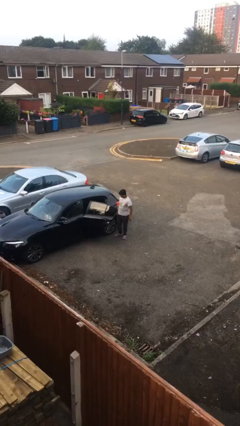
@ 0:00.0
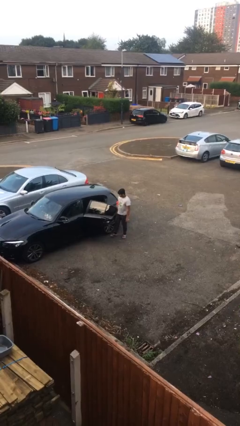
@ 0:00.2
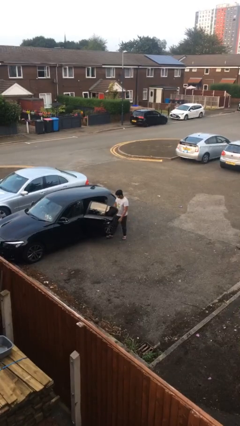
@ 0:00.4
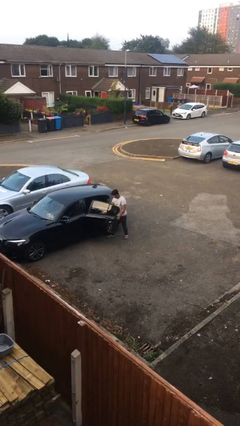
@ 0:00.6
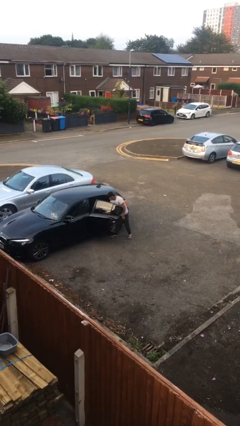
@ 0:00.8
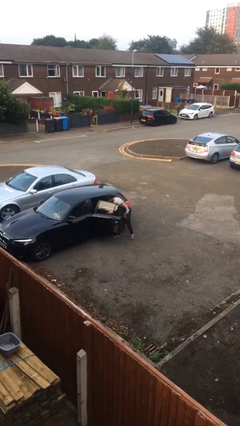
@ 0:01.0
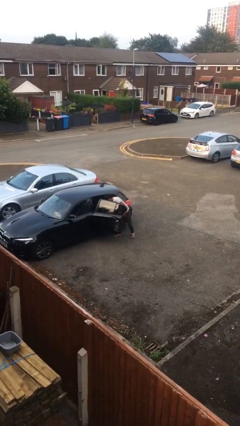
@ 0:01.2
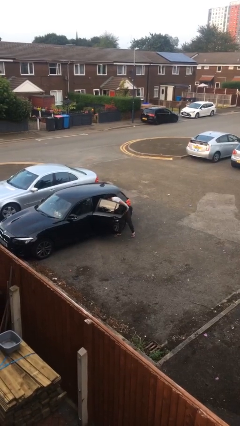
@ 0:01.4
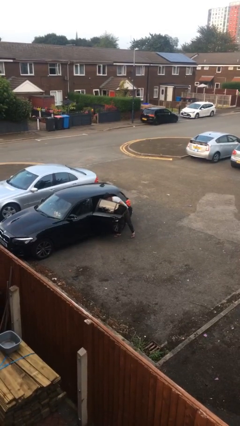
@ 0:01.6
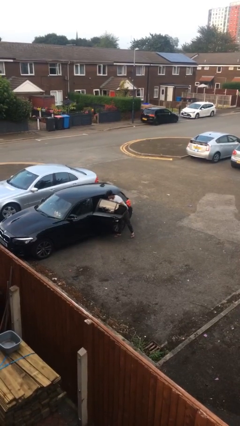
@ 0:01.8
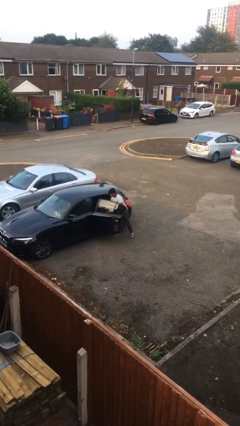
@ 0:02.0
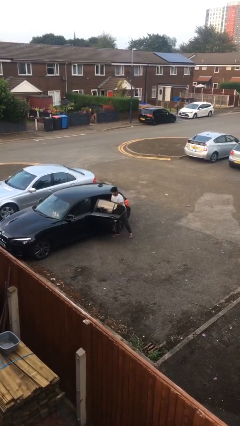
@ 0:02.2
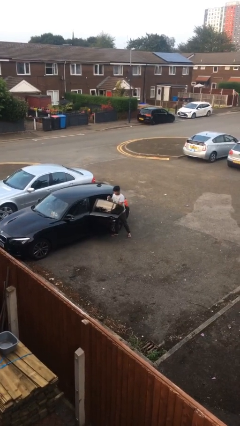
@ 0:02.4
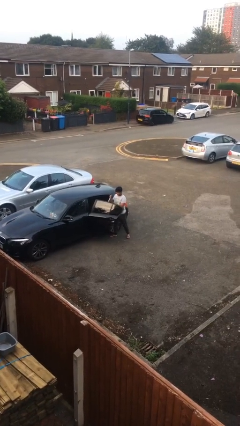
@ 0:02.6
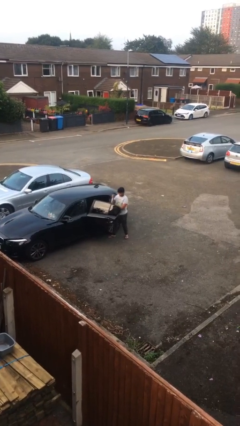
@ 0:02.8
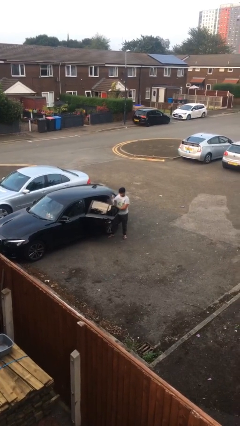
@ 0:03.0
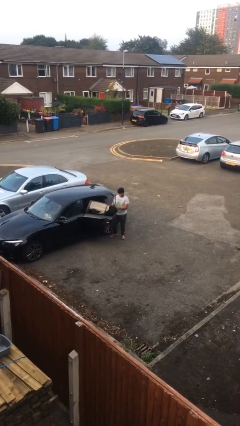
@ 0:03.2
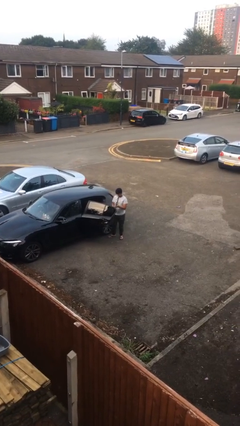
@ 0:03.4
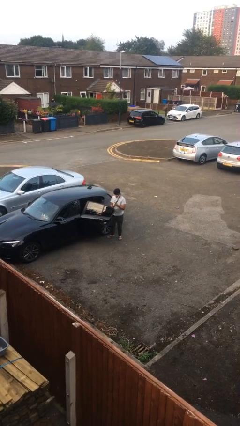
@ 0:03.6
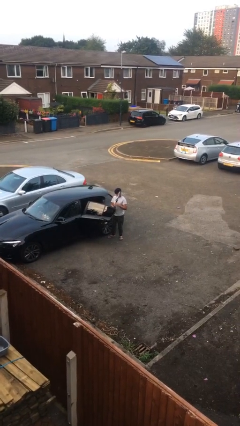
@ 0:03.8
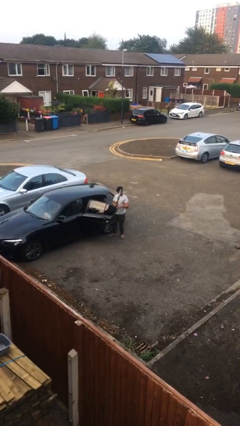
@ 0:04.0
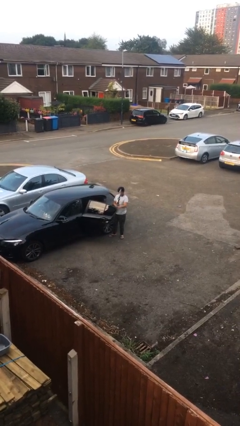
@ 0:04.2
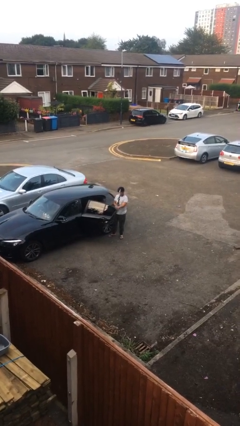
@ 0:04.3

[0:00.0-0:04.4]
person unloads car

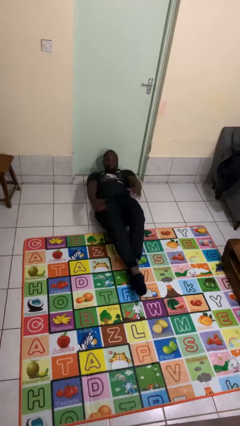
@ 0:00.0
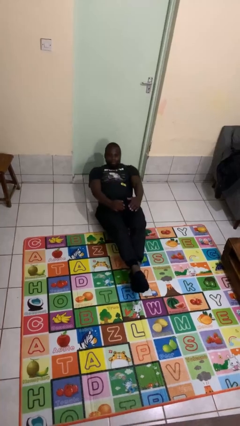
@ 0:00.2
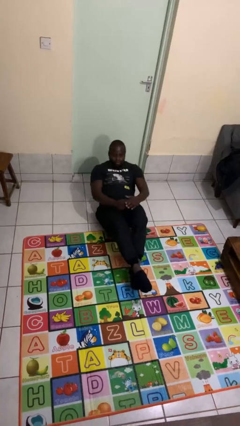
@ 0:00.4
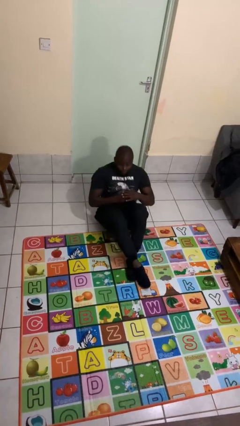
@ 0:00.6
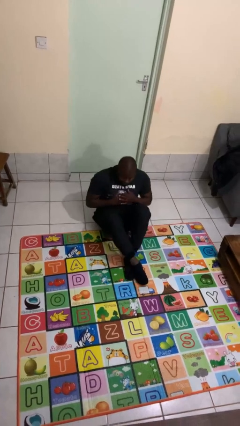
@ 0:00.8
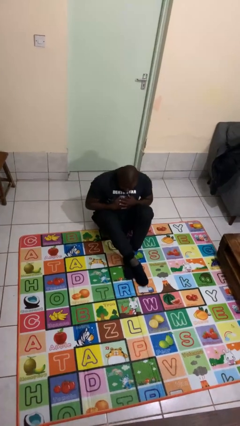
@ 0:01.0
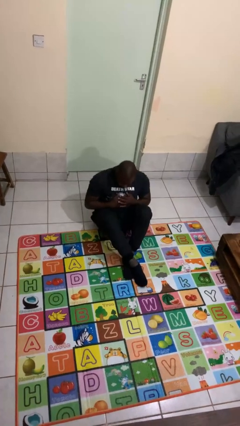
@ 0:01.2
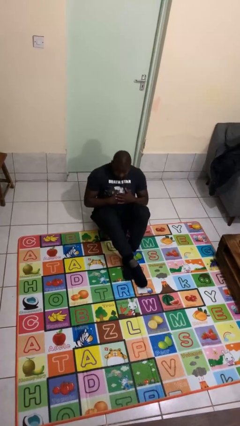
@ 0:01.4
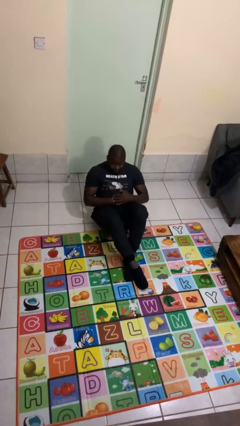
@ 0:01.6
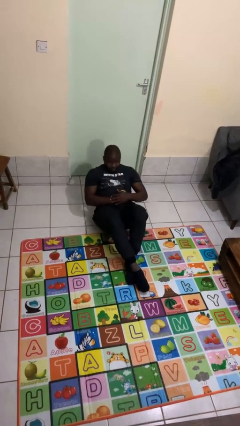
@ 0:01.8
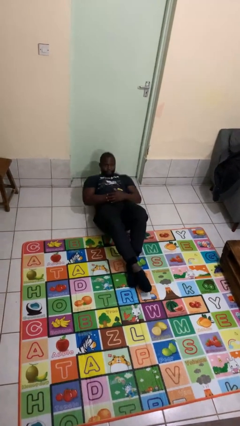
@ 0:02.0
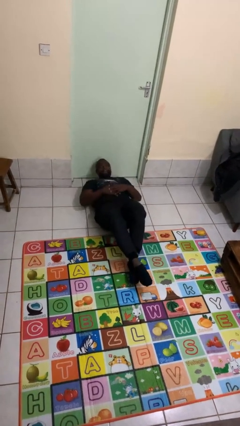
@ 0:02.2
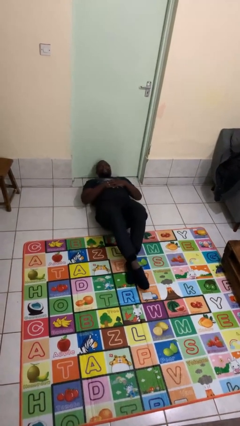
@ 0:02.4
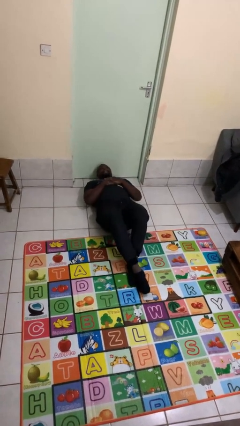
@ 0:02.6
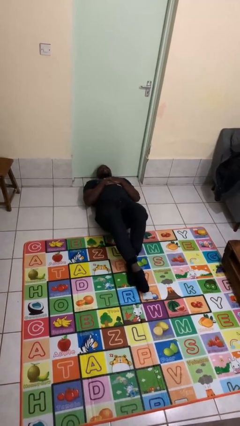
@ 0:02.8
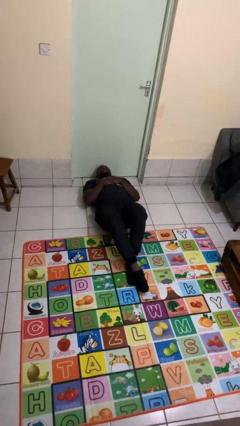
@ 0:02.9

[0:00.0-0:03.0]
person exercises with situp

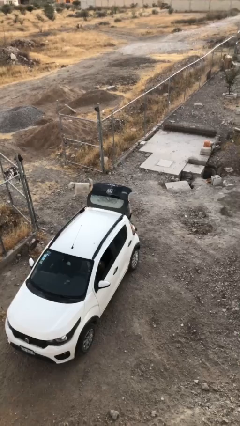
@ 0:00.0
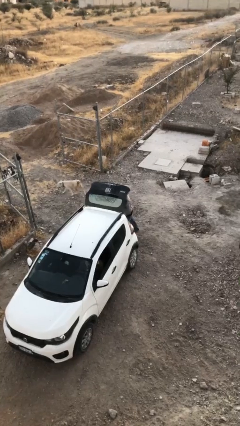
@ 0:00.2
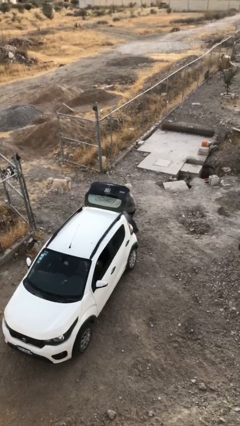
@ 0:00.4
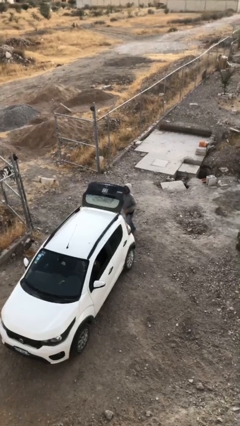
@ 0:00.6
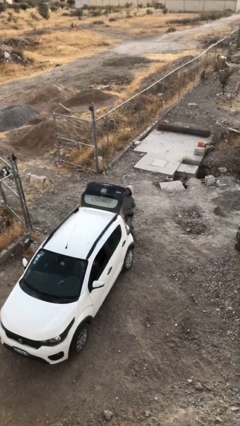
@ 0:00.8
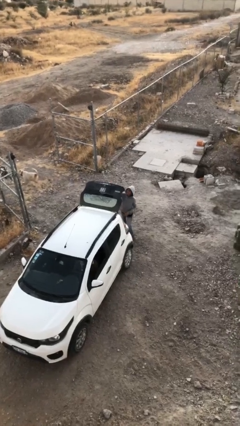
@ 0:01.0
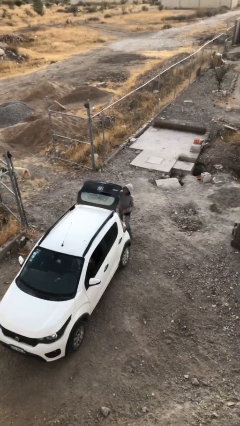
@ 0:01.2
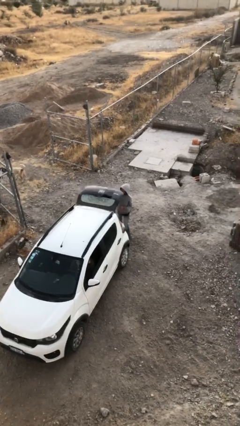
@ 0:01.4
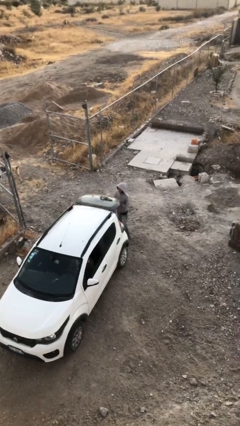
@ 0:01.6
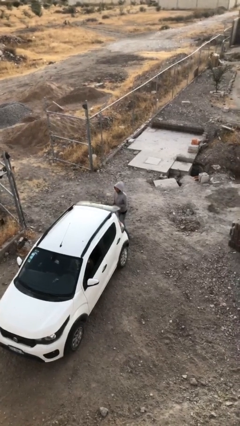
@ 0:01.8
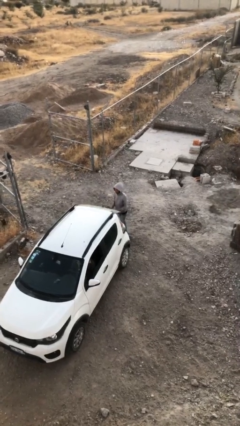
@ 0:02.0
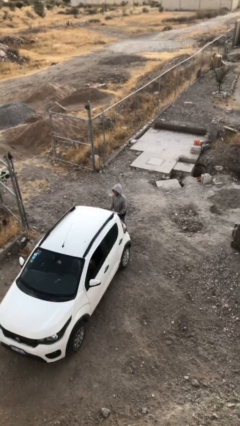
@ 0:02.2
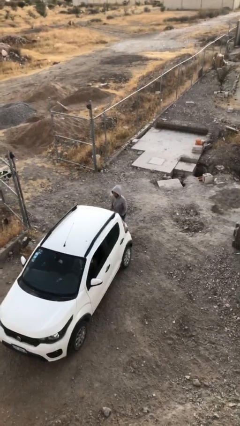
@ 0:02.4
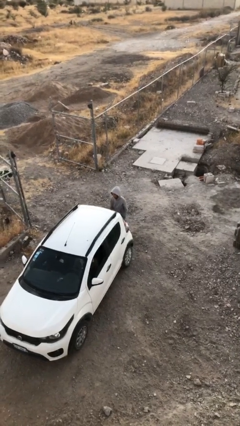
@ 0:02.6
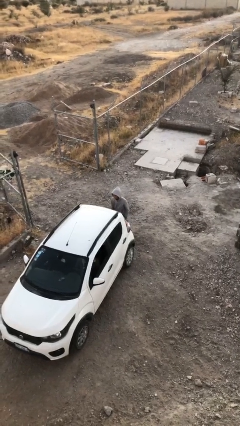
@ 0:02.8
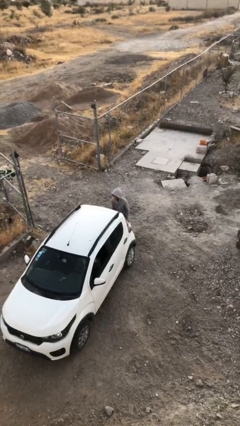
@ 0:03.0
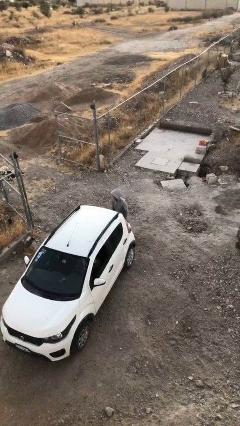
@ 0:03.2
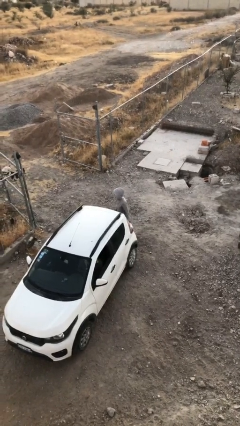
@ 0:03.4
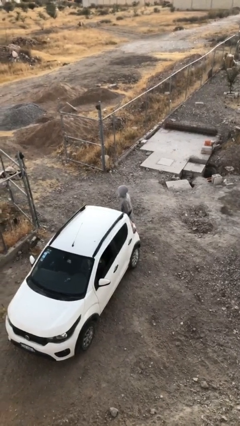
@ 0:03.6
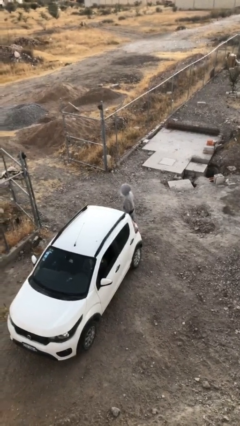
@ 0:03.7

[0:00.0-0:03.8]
person closes car trunk

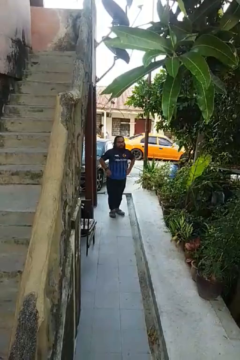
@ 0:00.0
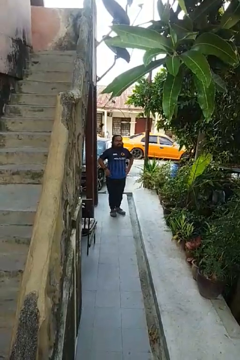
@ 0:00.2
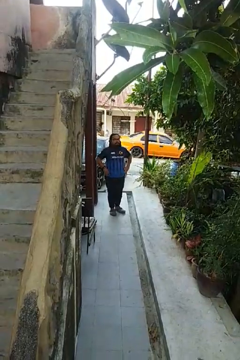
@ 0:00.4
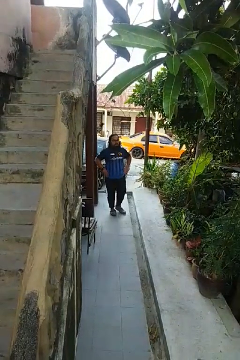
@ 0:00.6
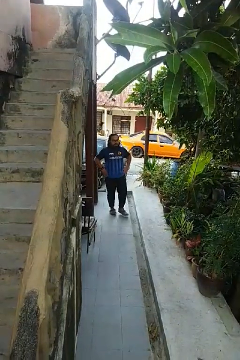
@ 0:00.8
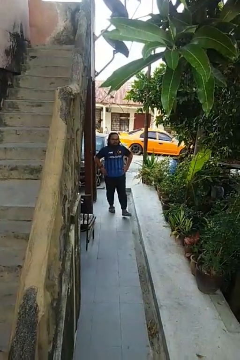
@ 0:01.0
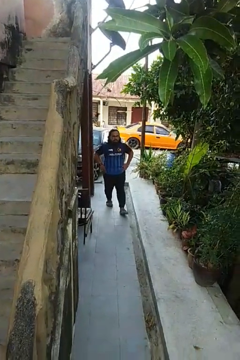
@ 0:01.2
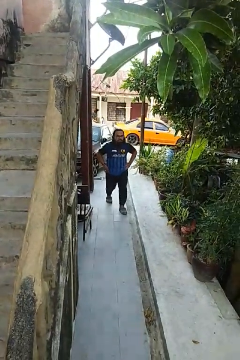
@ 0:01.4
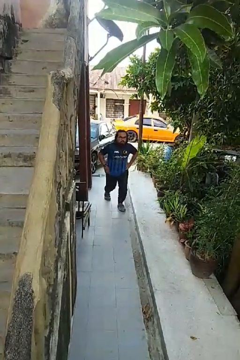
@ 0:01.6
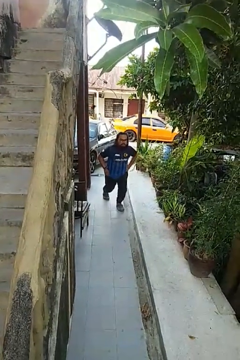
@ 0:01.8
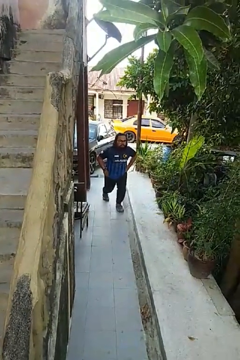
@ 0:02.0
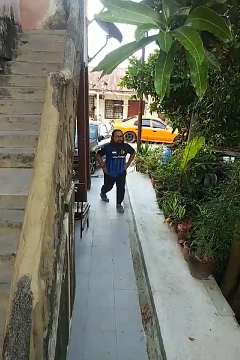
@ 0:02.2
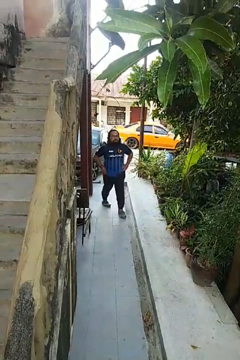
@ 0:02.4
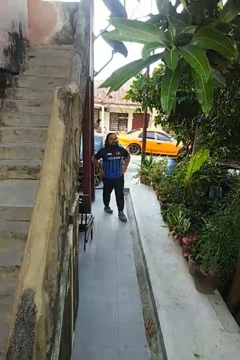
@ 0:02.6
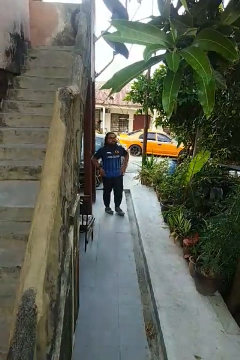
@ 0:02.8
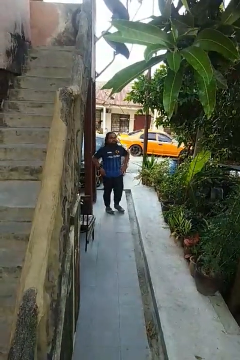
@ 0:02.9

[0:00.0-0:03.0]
person exercises with lunges

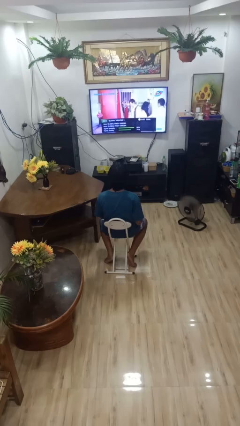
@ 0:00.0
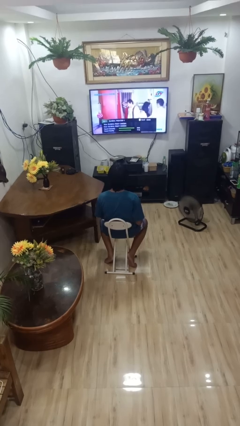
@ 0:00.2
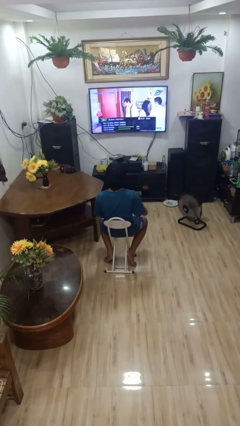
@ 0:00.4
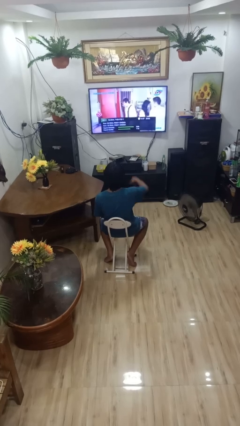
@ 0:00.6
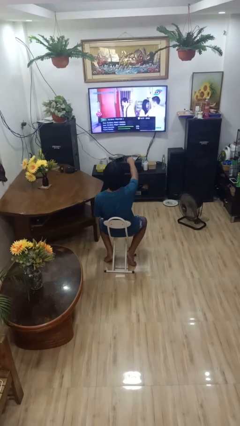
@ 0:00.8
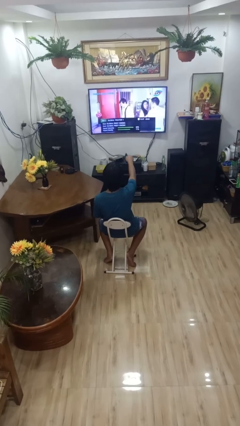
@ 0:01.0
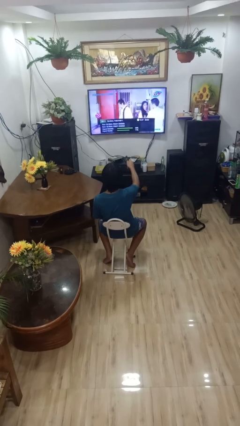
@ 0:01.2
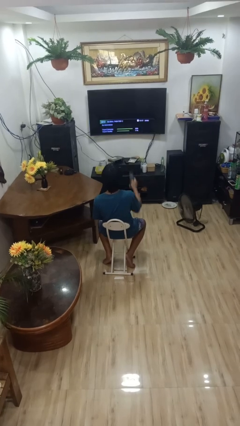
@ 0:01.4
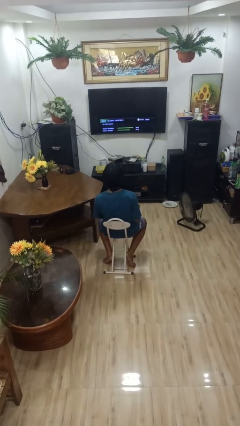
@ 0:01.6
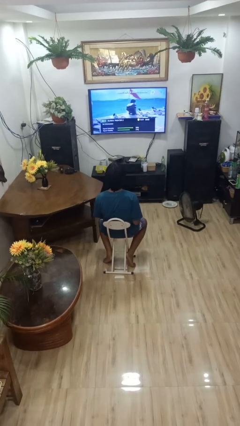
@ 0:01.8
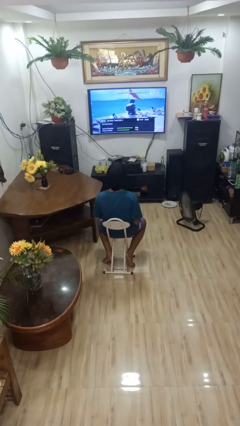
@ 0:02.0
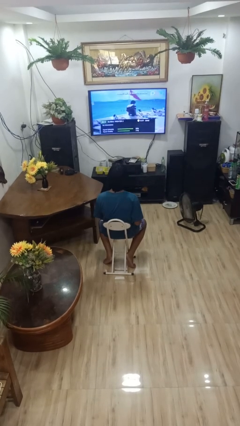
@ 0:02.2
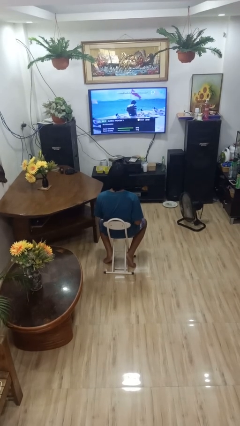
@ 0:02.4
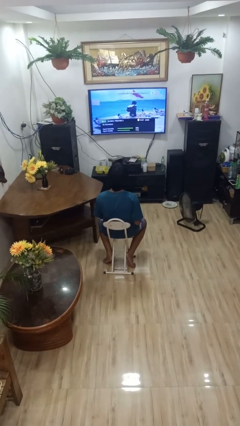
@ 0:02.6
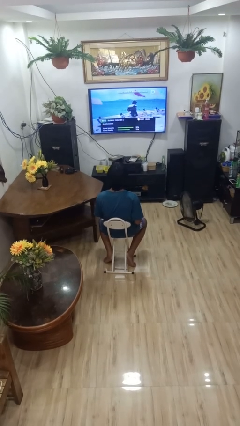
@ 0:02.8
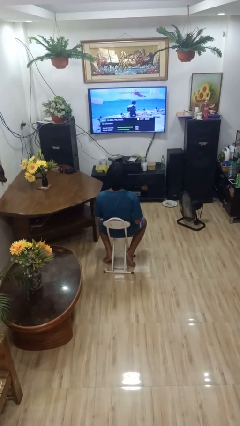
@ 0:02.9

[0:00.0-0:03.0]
person uses television remote

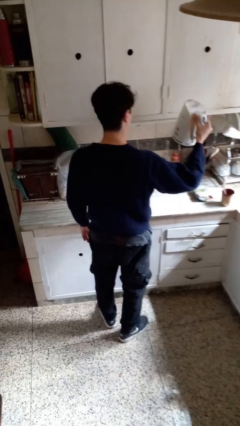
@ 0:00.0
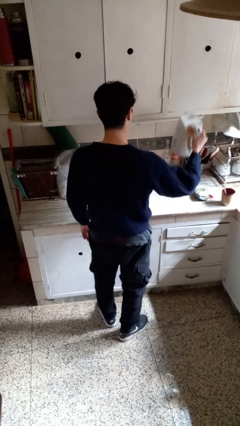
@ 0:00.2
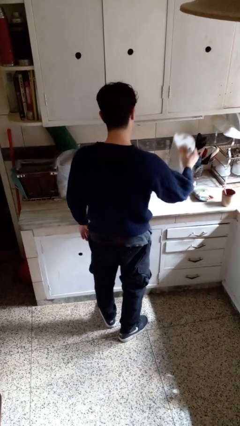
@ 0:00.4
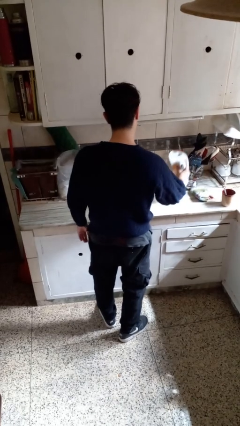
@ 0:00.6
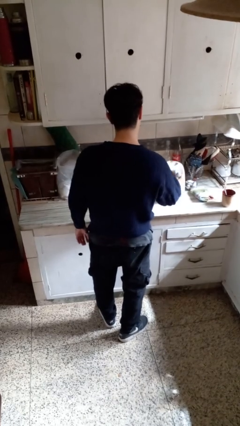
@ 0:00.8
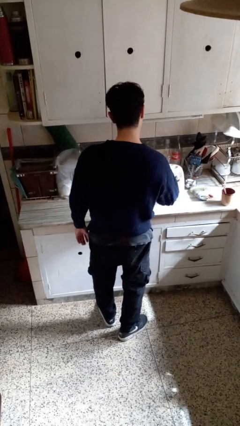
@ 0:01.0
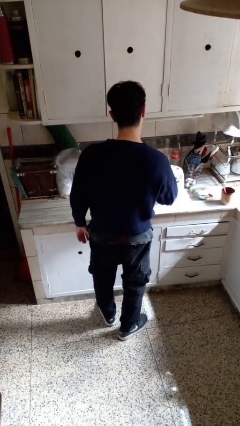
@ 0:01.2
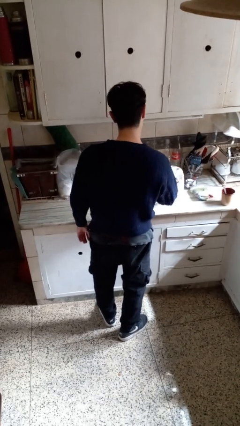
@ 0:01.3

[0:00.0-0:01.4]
person puts down object on countertop
